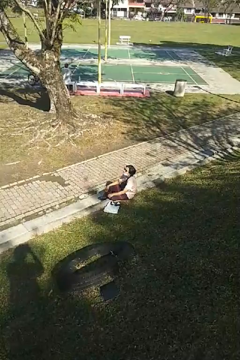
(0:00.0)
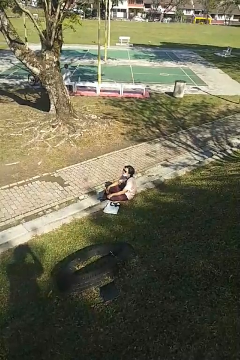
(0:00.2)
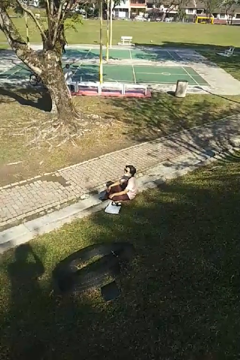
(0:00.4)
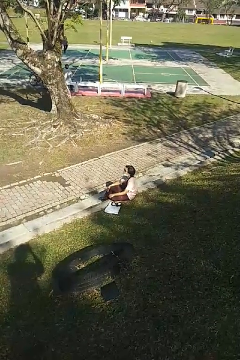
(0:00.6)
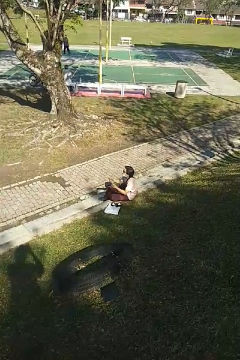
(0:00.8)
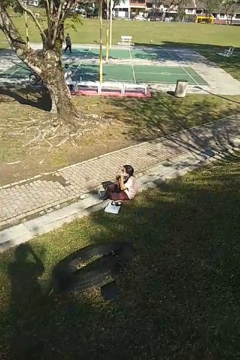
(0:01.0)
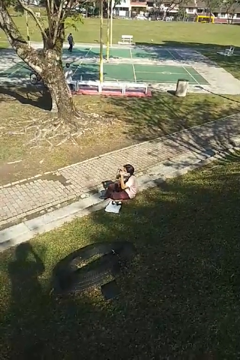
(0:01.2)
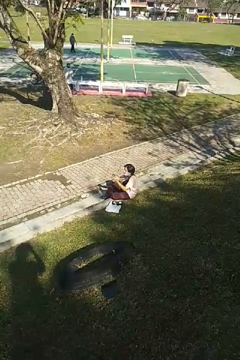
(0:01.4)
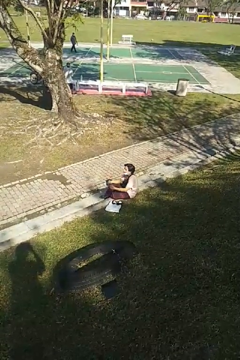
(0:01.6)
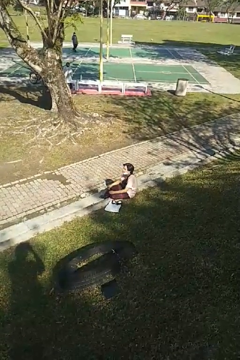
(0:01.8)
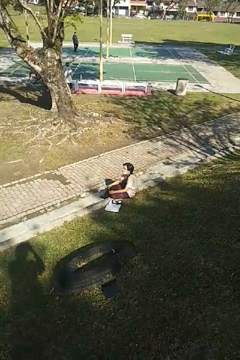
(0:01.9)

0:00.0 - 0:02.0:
person takes off sunglasses

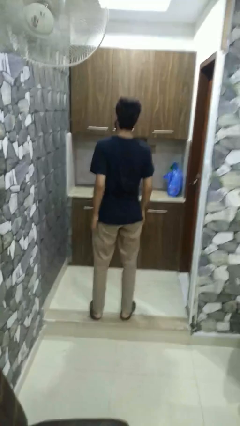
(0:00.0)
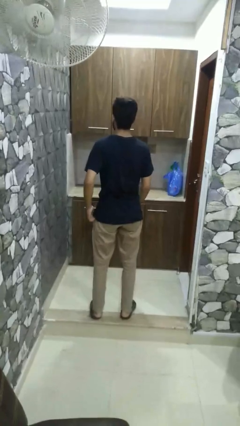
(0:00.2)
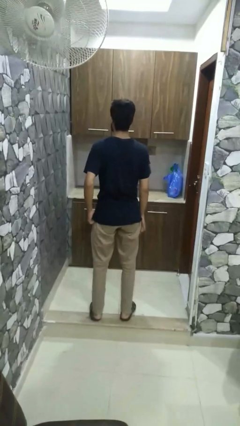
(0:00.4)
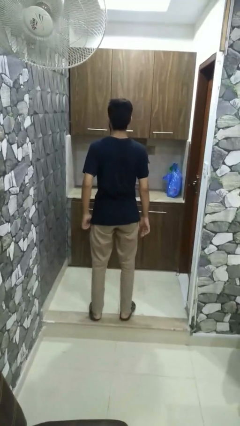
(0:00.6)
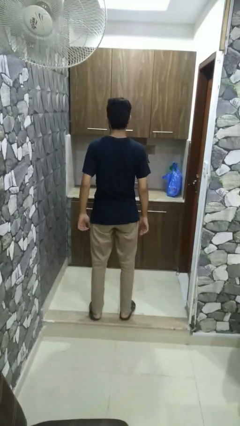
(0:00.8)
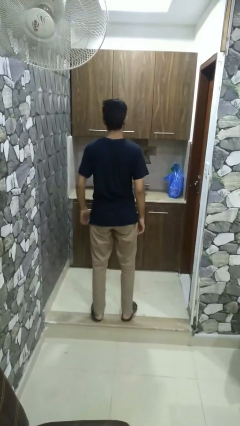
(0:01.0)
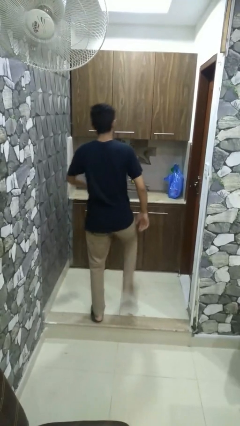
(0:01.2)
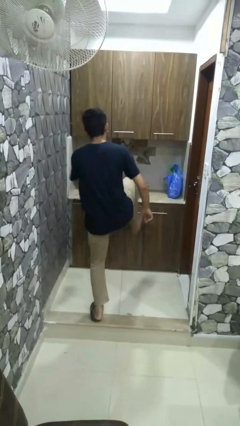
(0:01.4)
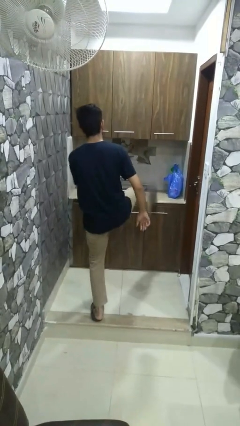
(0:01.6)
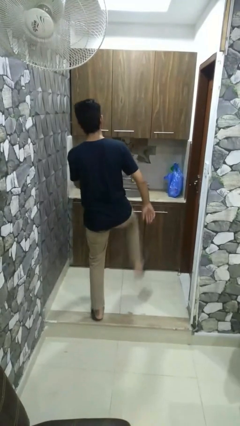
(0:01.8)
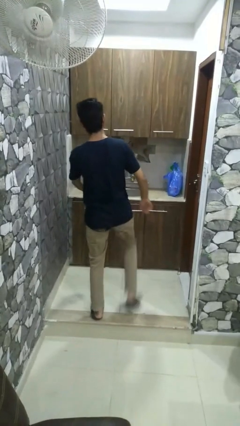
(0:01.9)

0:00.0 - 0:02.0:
person karate kicks

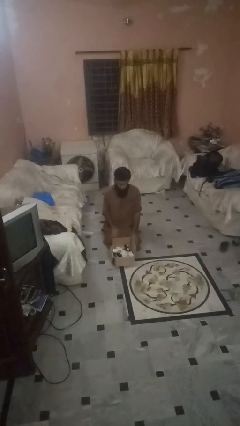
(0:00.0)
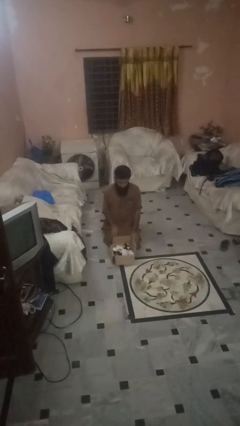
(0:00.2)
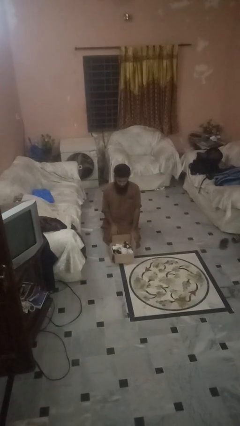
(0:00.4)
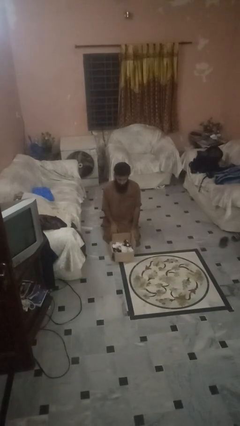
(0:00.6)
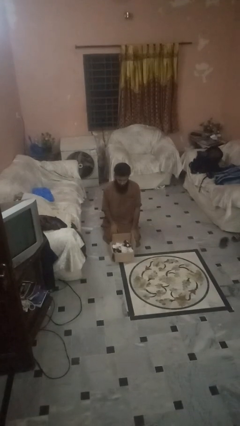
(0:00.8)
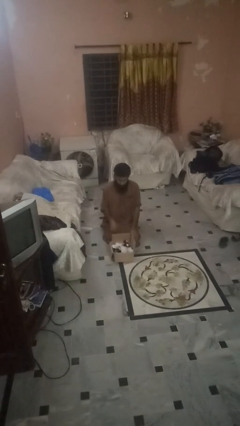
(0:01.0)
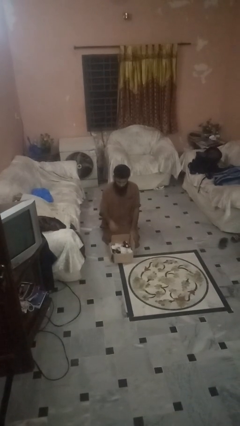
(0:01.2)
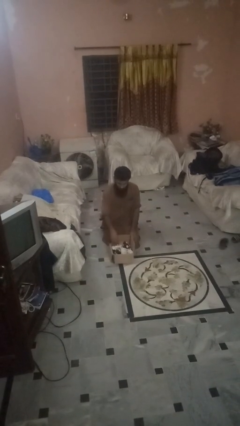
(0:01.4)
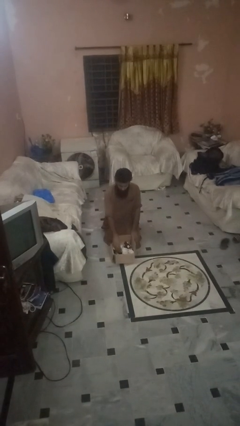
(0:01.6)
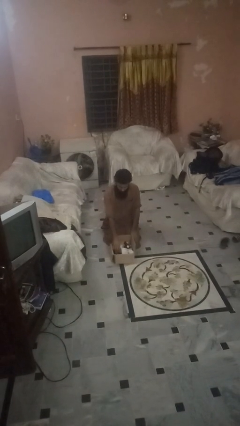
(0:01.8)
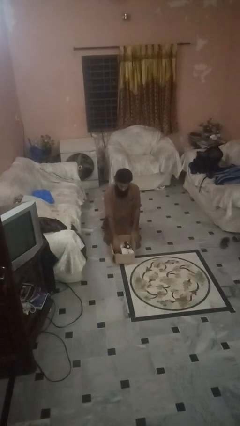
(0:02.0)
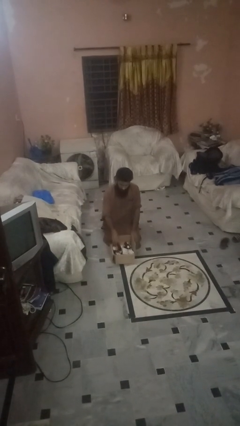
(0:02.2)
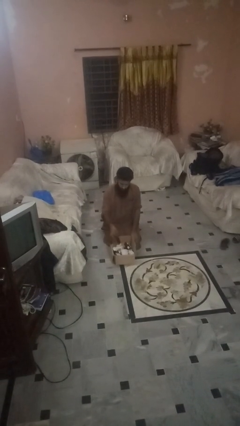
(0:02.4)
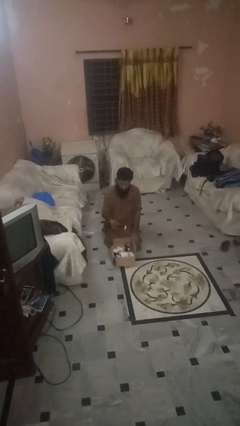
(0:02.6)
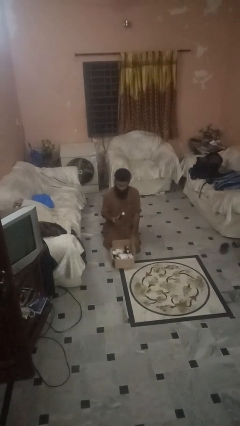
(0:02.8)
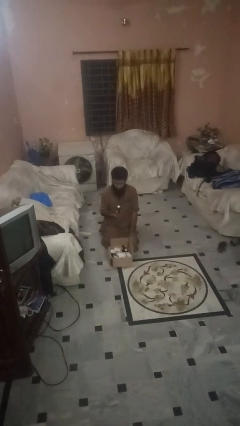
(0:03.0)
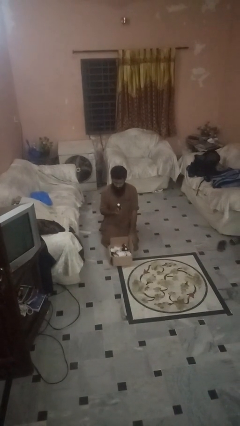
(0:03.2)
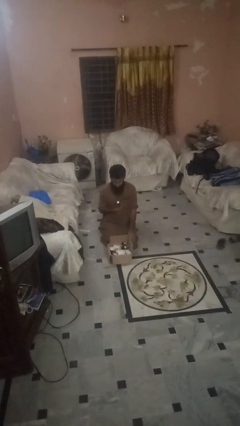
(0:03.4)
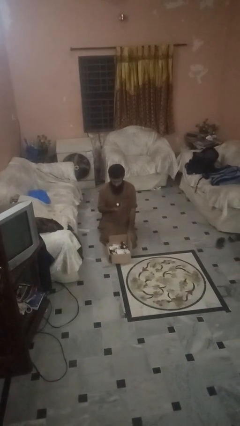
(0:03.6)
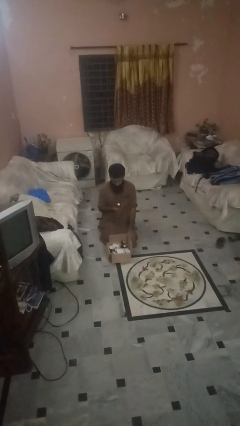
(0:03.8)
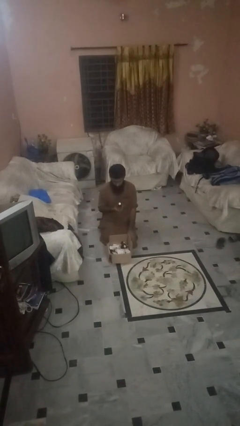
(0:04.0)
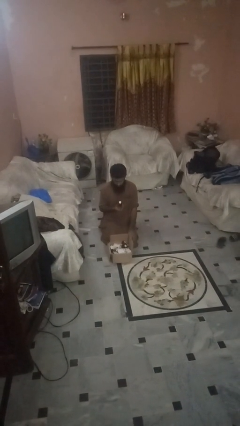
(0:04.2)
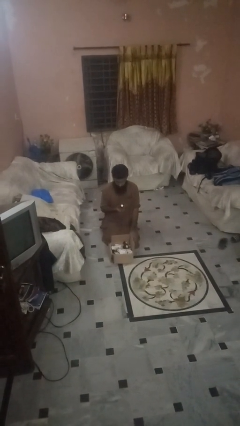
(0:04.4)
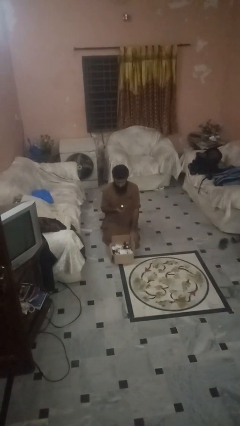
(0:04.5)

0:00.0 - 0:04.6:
person takes object from box

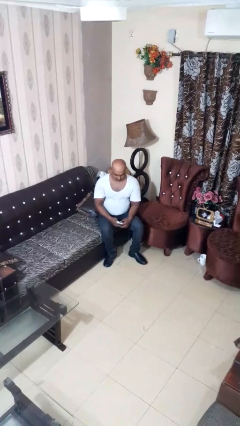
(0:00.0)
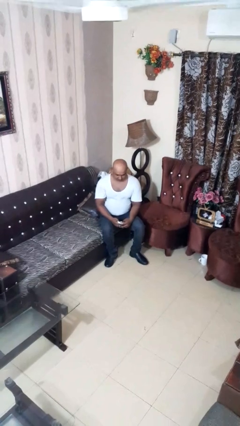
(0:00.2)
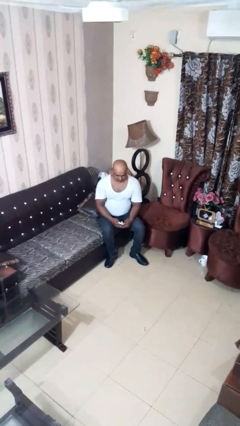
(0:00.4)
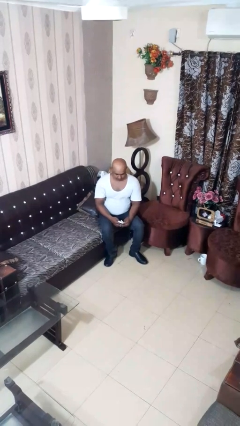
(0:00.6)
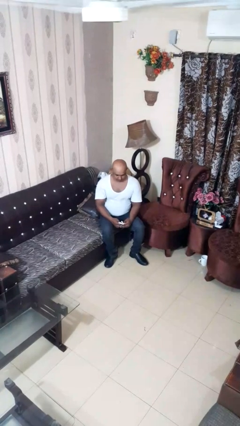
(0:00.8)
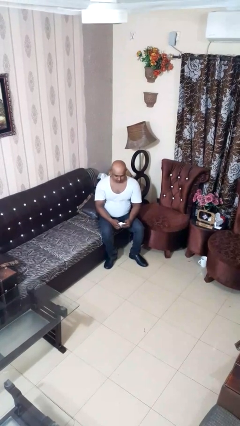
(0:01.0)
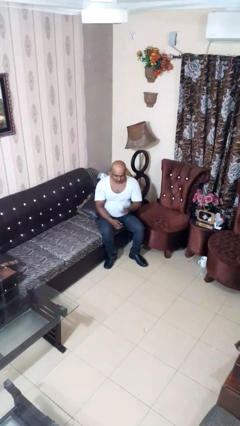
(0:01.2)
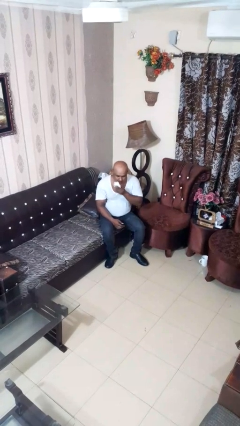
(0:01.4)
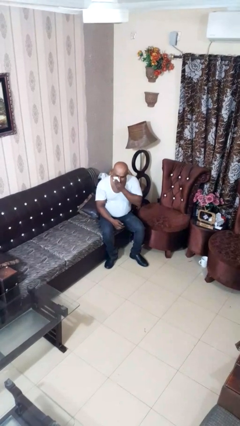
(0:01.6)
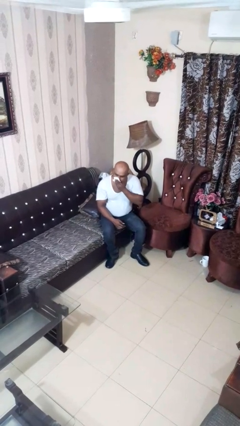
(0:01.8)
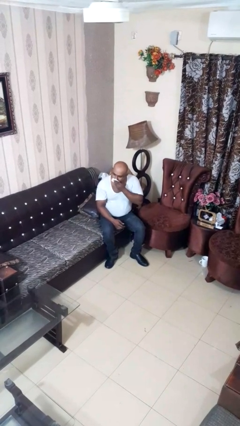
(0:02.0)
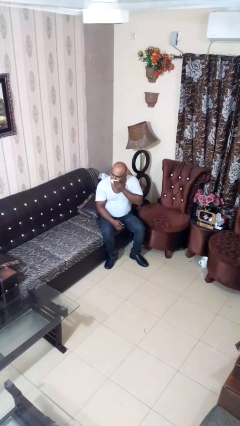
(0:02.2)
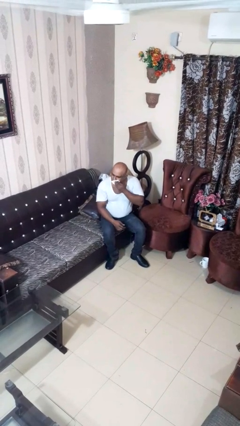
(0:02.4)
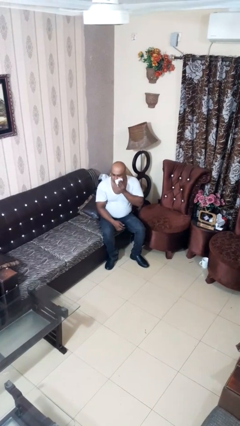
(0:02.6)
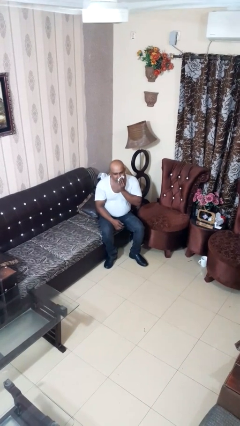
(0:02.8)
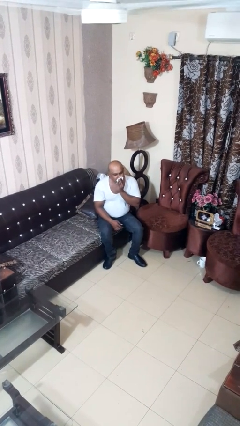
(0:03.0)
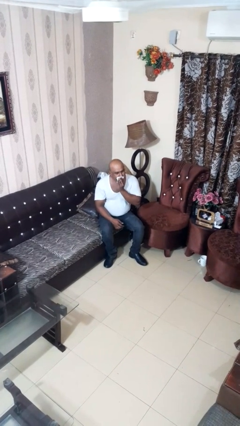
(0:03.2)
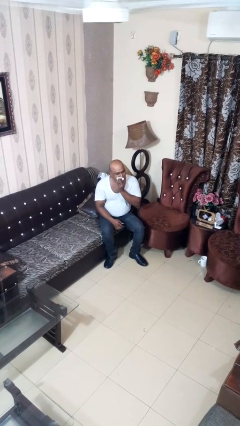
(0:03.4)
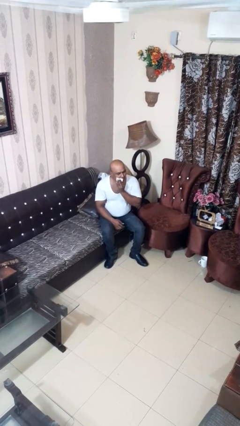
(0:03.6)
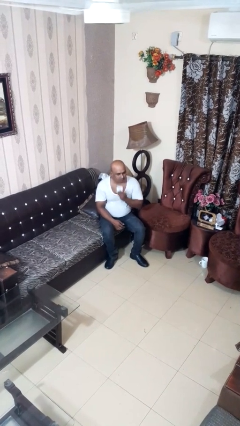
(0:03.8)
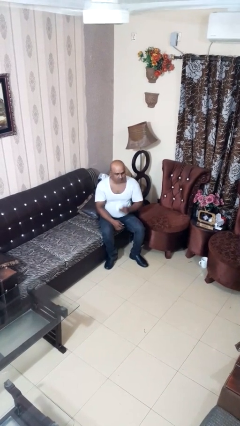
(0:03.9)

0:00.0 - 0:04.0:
person wipes mouth with napkin

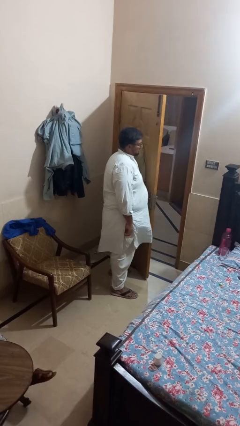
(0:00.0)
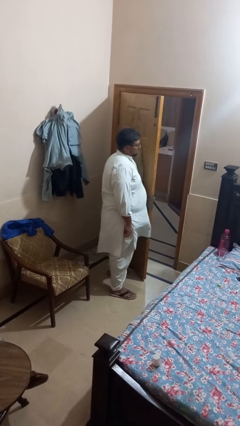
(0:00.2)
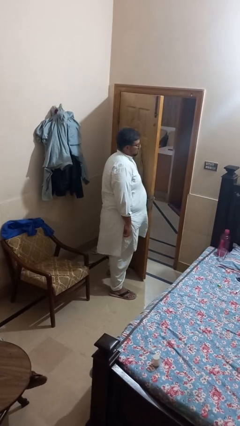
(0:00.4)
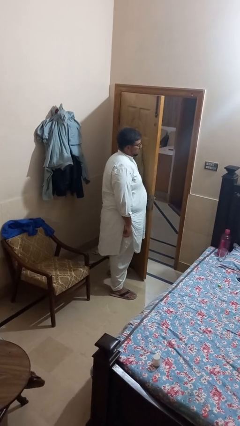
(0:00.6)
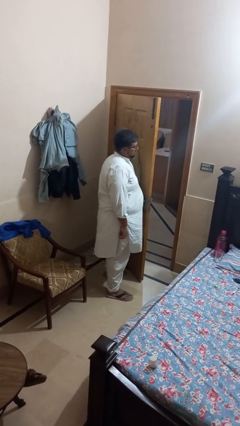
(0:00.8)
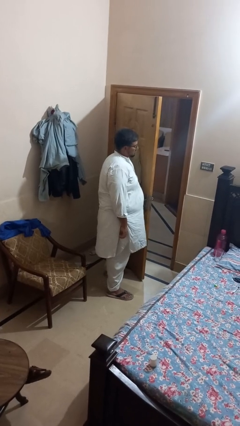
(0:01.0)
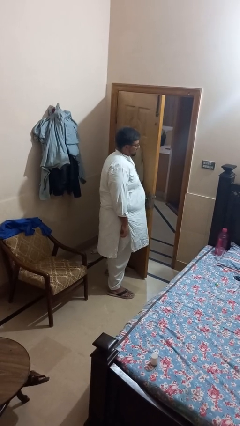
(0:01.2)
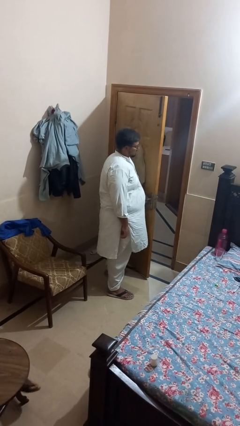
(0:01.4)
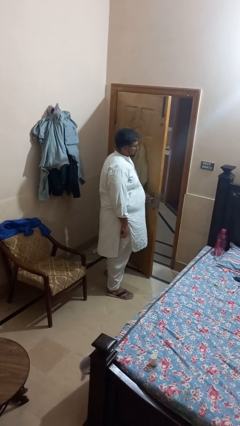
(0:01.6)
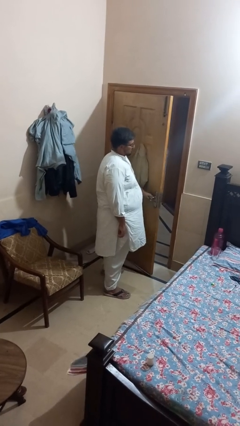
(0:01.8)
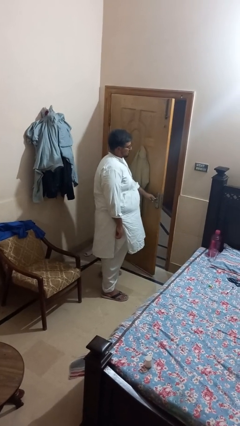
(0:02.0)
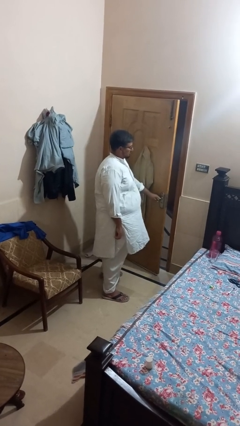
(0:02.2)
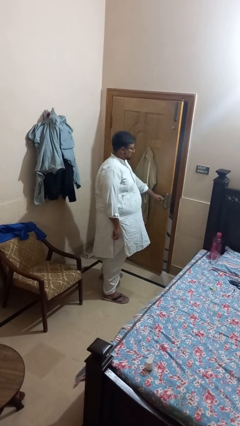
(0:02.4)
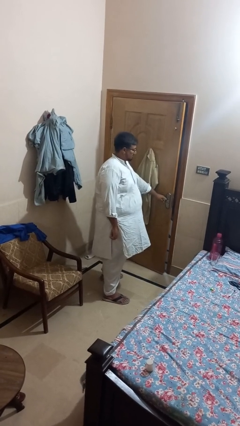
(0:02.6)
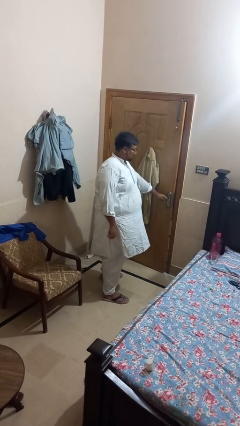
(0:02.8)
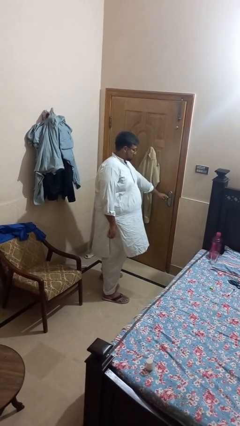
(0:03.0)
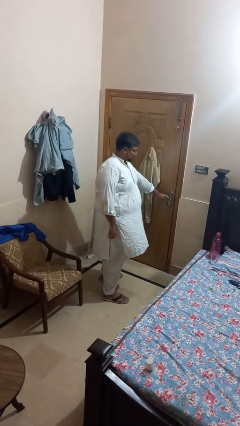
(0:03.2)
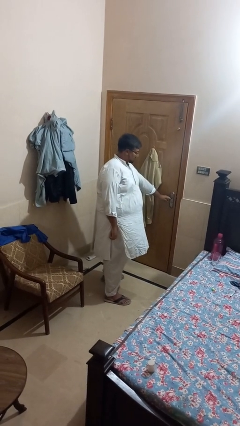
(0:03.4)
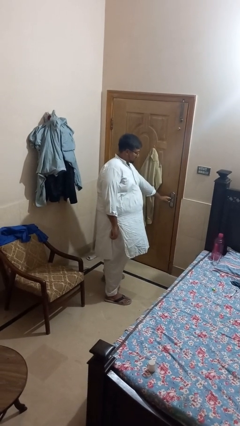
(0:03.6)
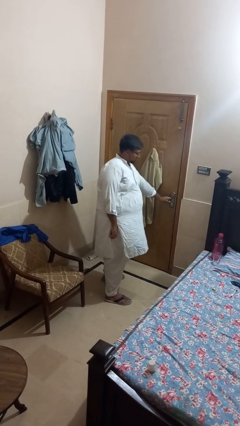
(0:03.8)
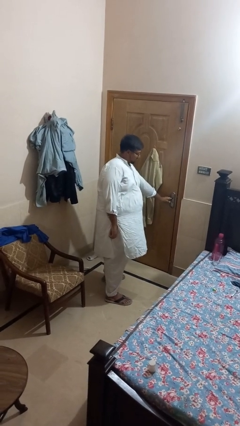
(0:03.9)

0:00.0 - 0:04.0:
person closes closet door

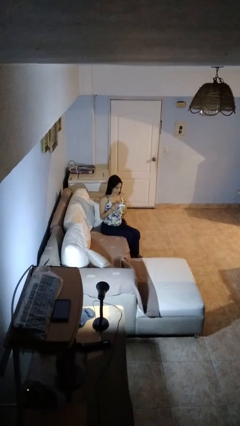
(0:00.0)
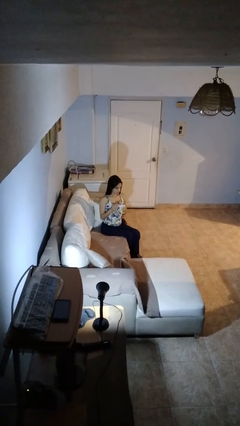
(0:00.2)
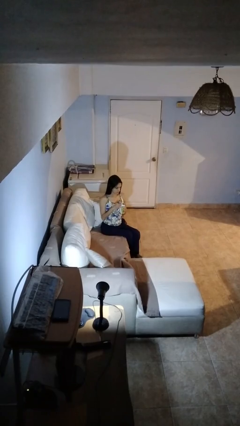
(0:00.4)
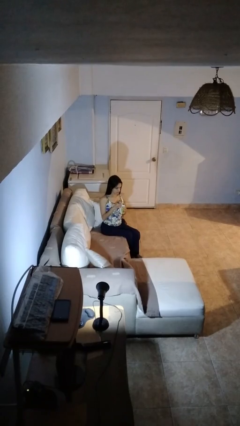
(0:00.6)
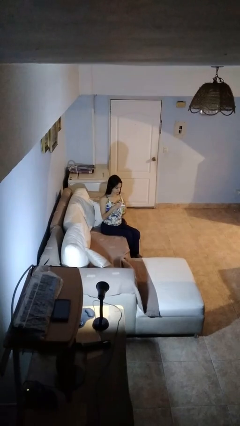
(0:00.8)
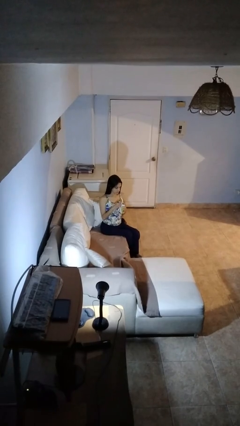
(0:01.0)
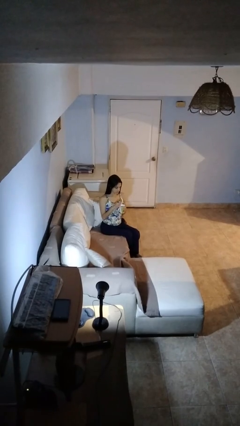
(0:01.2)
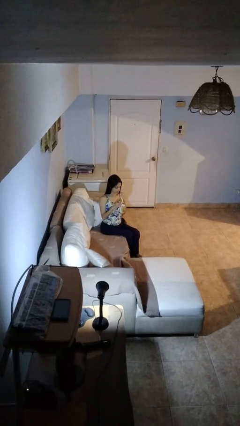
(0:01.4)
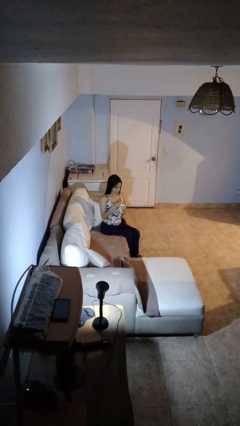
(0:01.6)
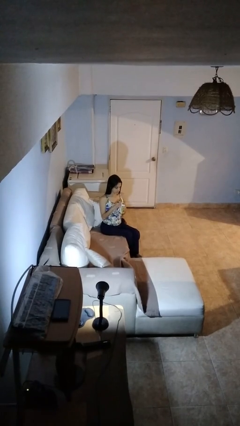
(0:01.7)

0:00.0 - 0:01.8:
person stirs mug
